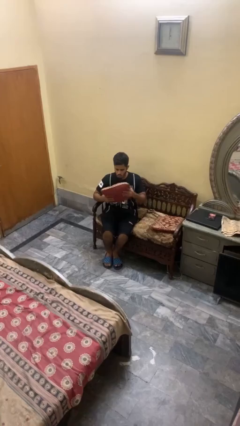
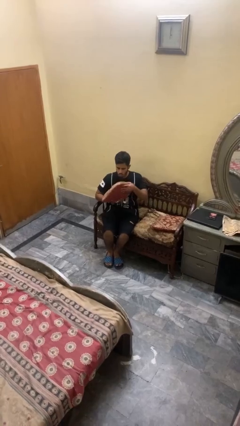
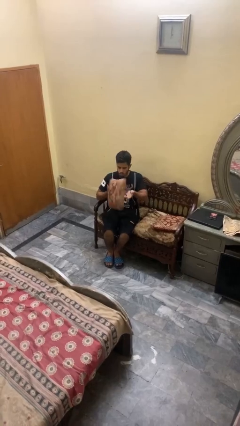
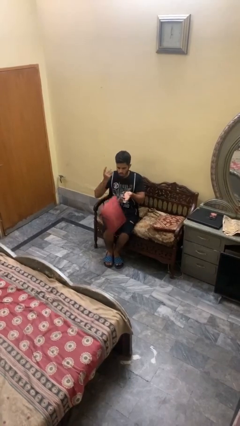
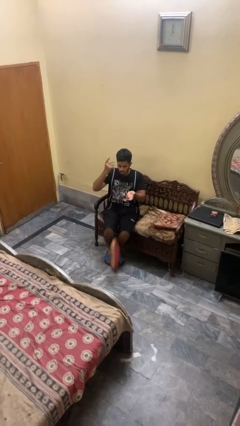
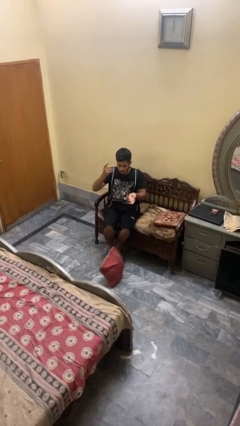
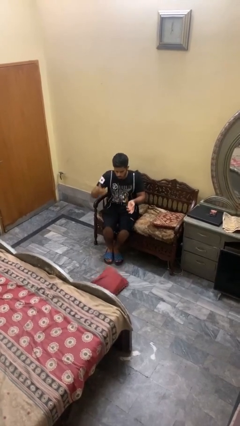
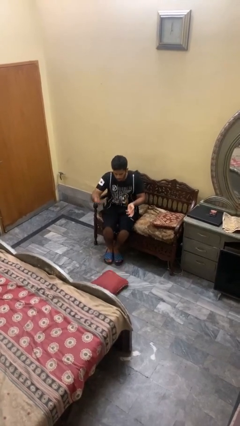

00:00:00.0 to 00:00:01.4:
person drops object

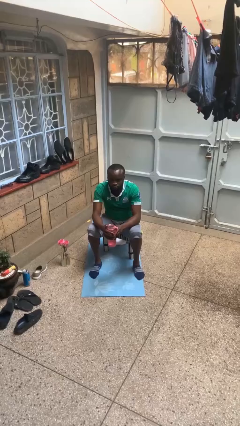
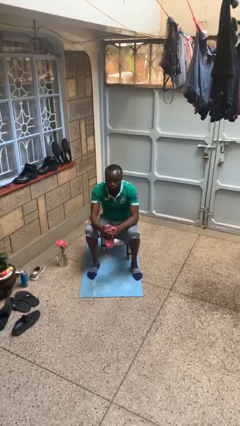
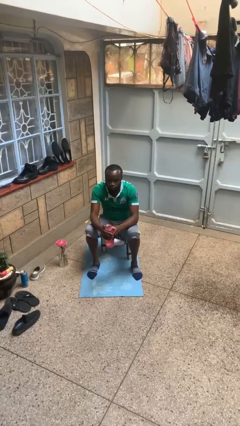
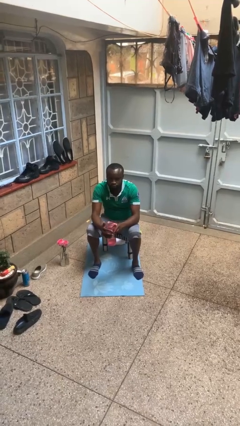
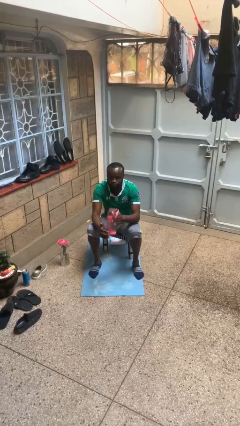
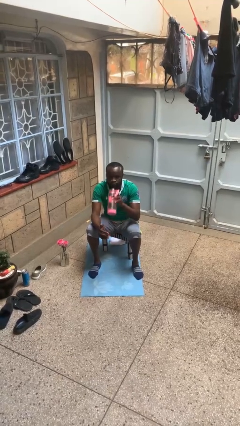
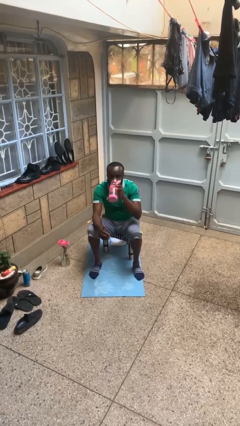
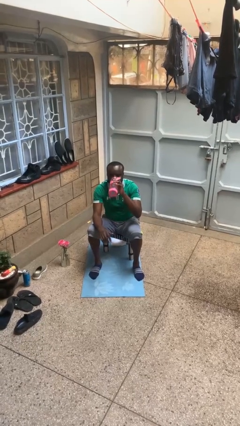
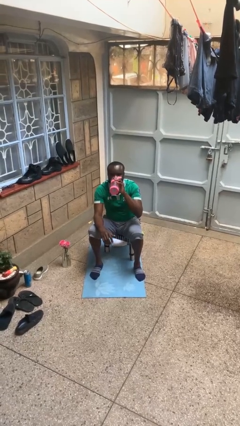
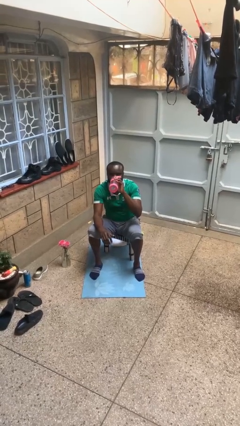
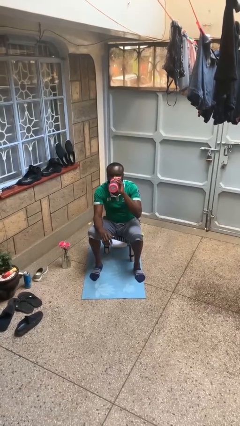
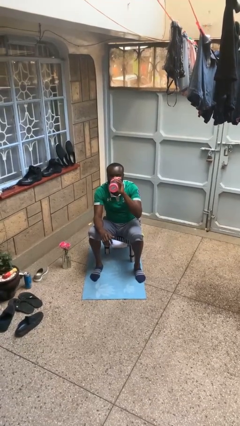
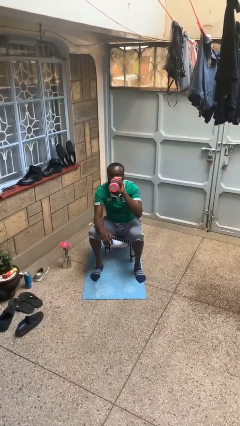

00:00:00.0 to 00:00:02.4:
person drinks from bottle

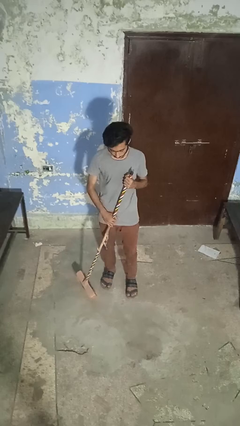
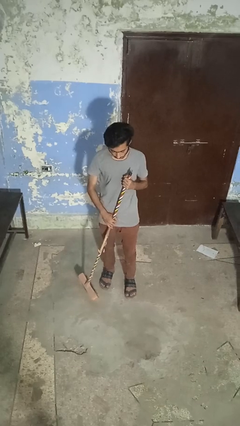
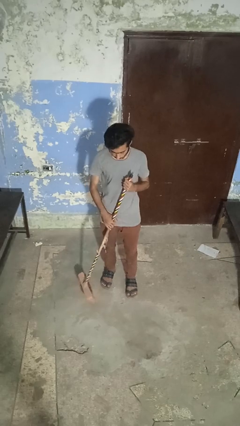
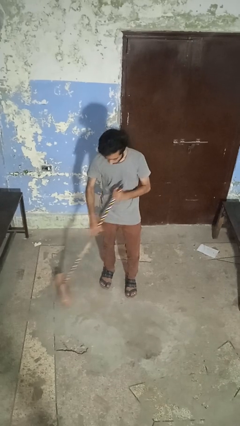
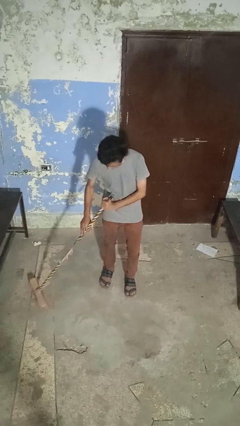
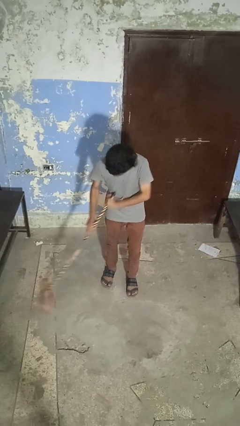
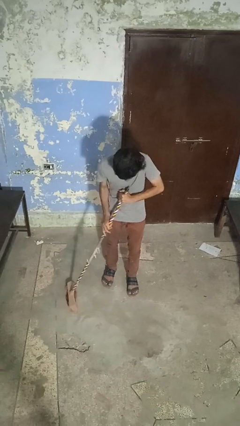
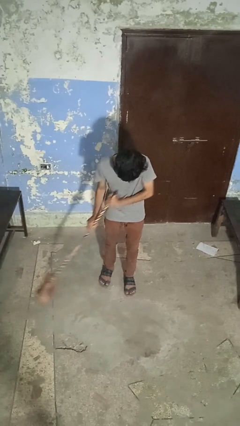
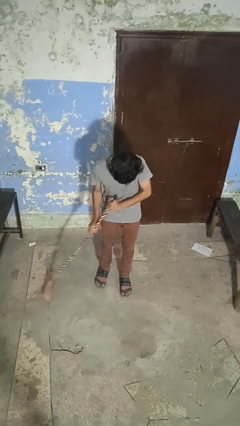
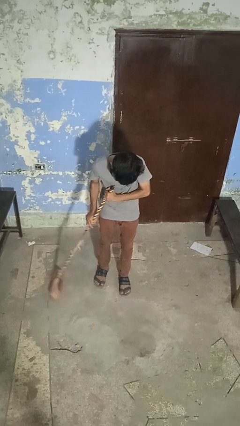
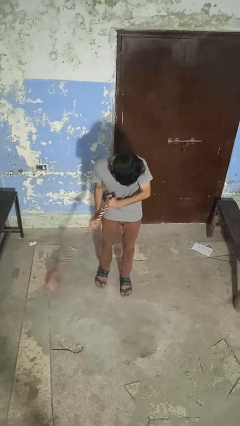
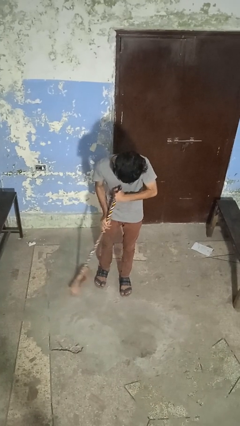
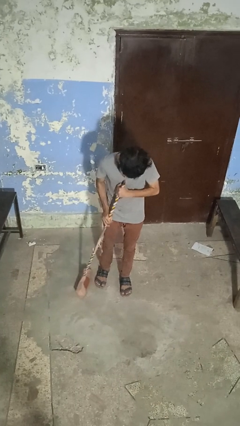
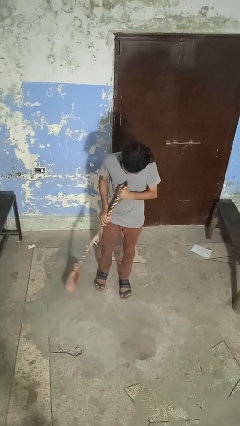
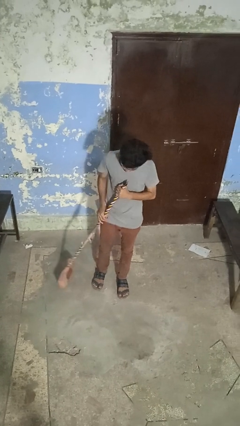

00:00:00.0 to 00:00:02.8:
person sweeps floor

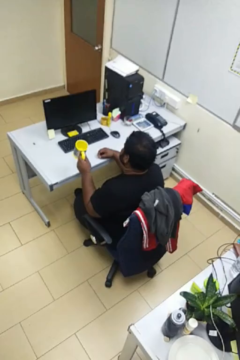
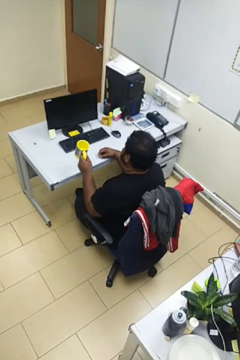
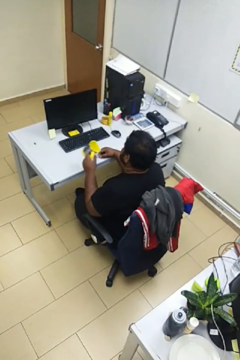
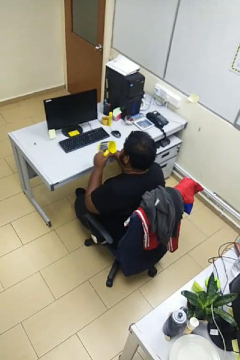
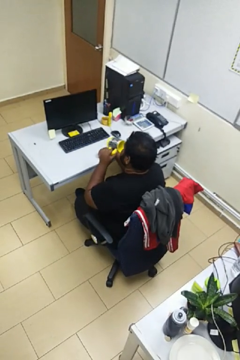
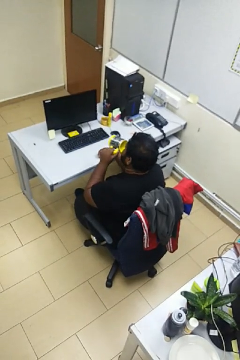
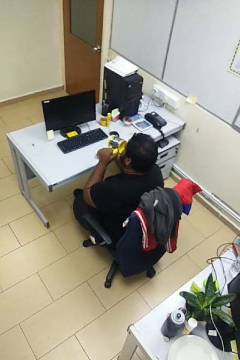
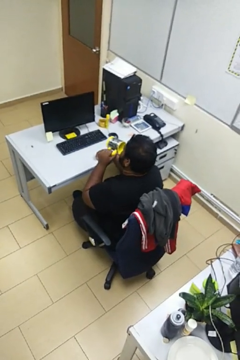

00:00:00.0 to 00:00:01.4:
person drinks from mug

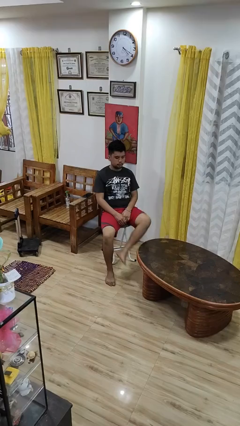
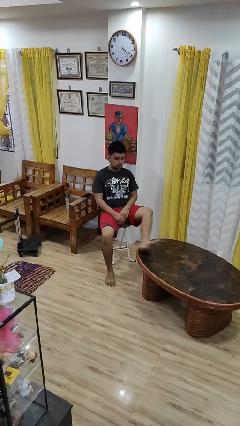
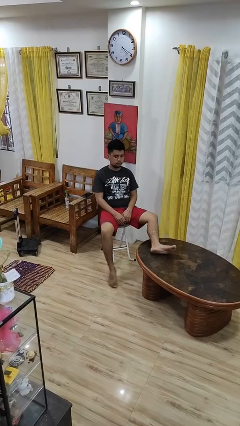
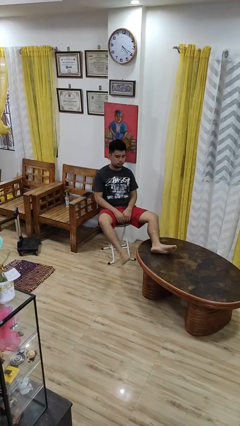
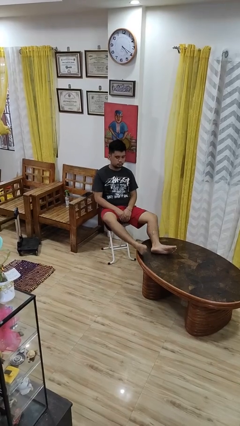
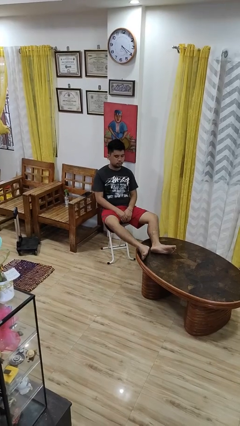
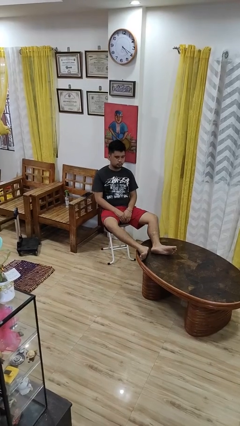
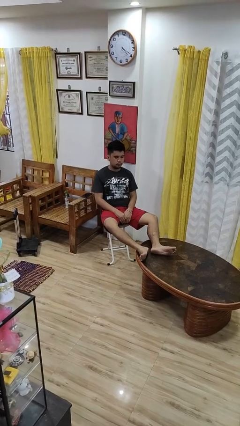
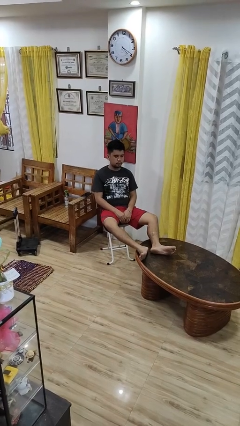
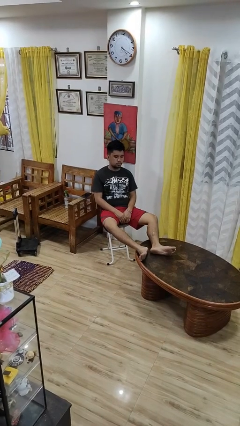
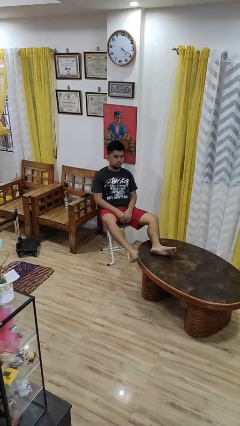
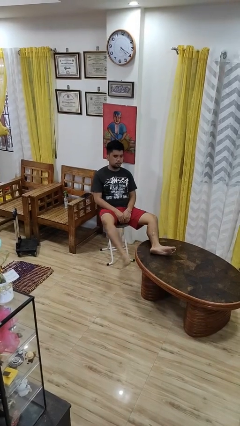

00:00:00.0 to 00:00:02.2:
person puts feet up

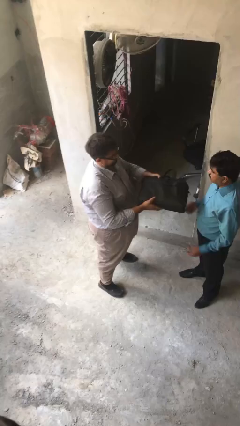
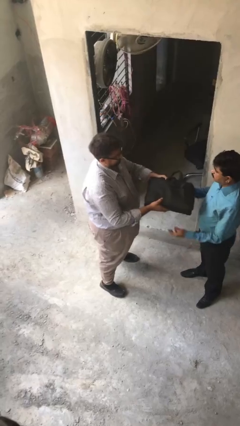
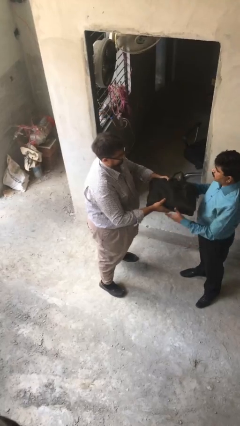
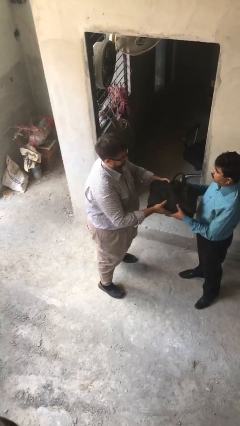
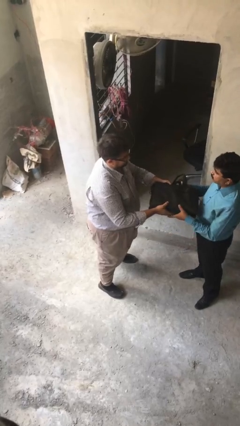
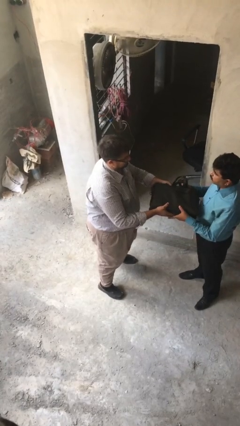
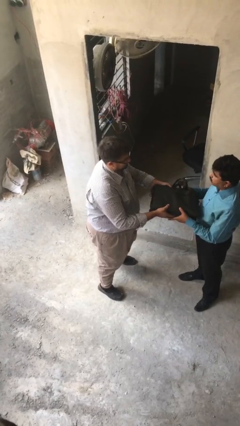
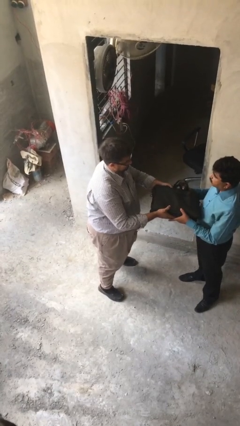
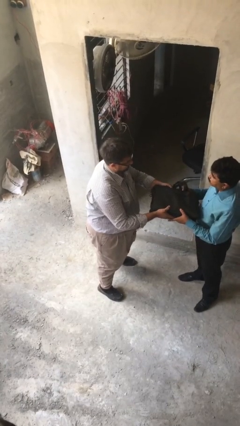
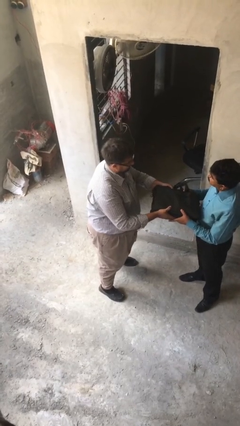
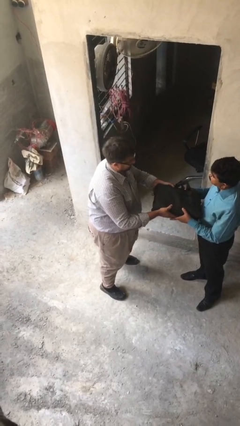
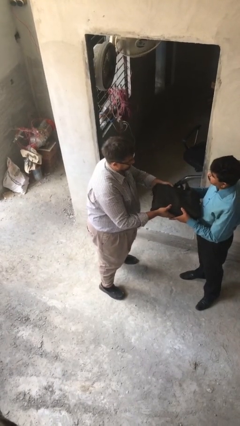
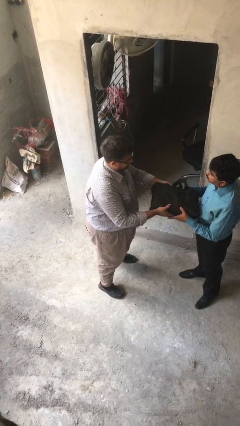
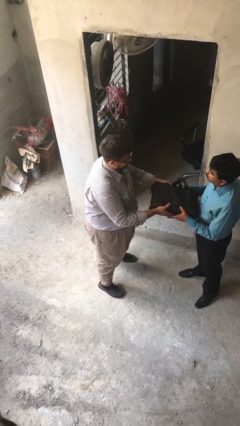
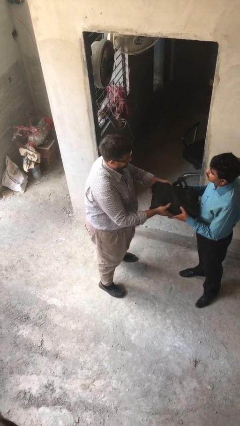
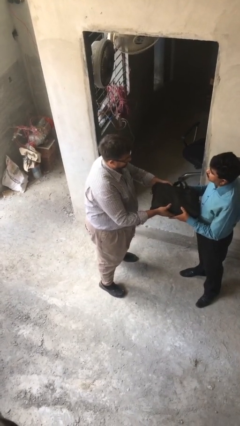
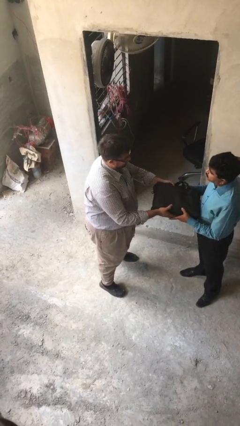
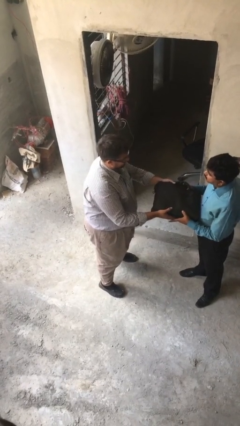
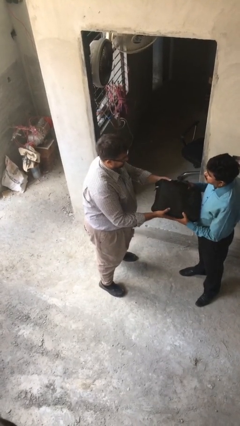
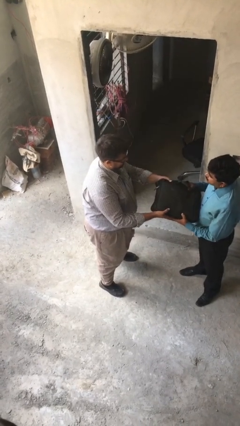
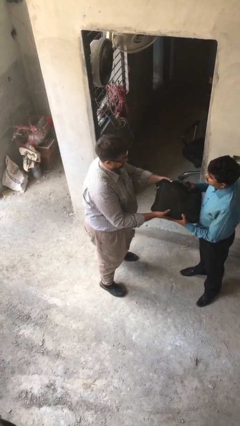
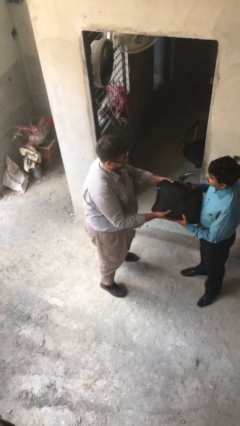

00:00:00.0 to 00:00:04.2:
person transfers object to person

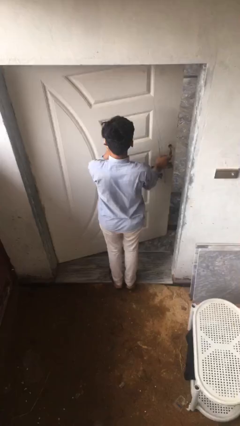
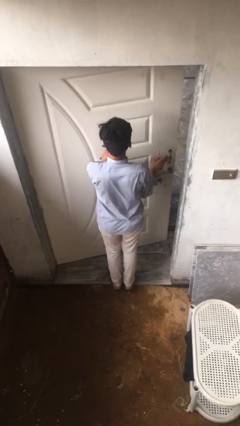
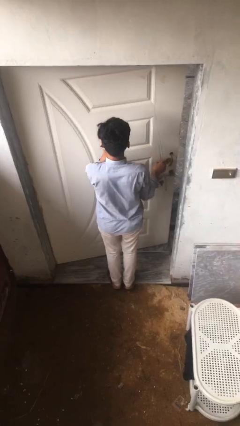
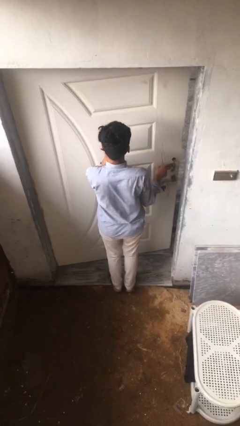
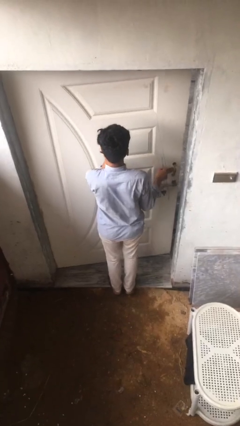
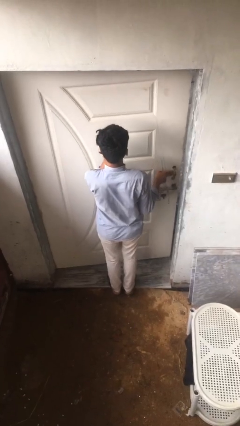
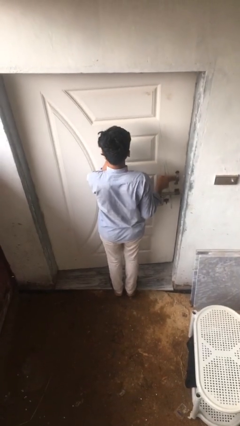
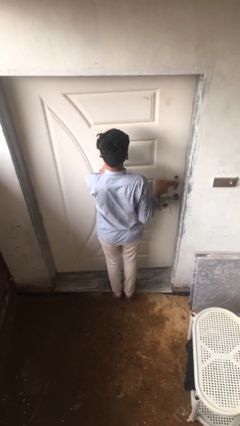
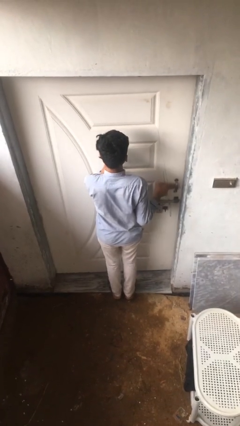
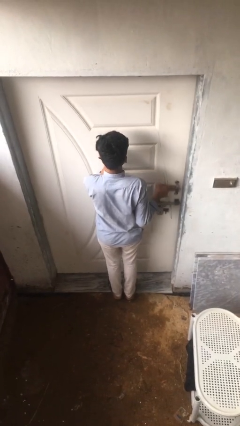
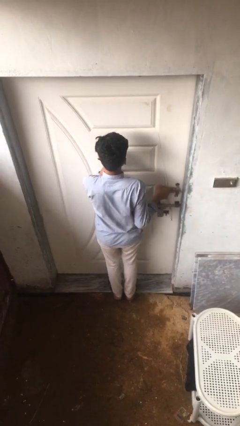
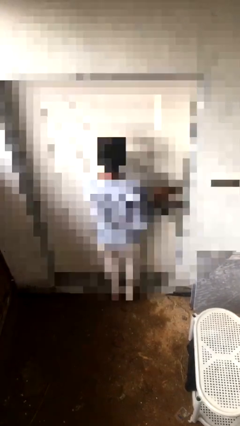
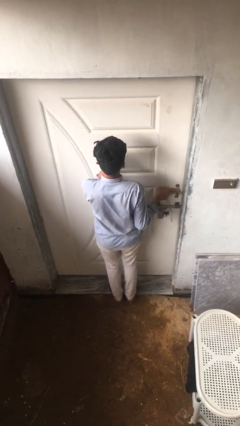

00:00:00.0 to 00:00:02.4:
person closes facility door
